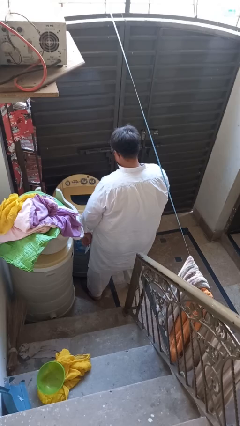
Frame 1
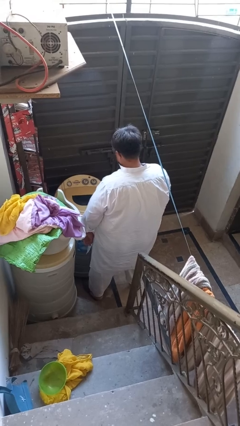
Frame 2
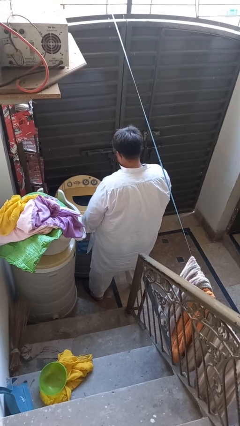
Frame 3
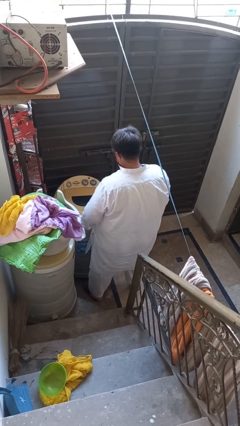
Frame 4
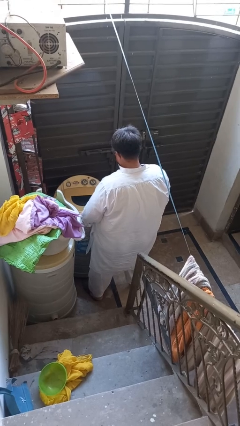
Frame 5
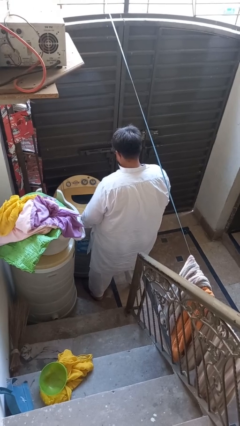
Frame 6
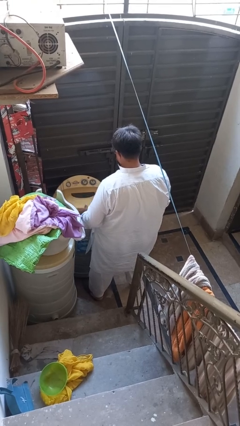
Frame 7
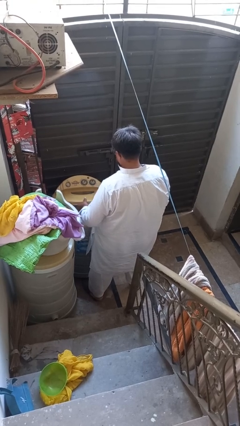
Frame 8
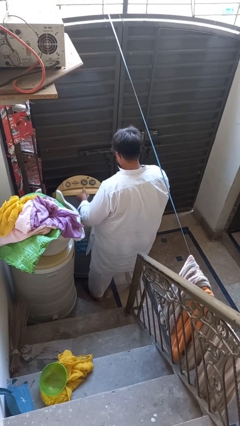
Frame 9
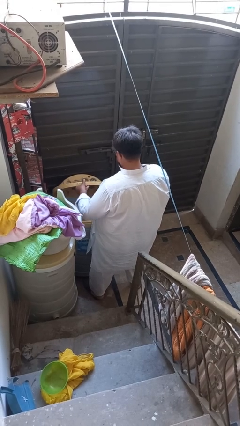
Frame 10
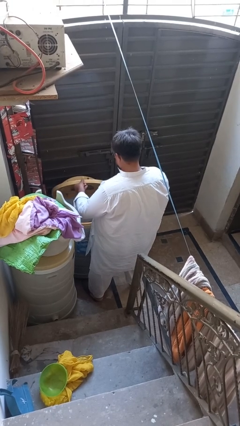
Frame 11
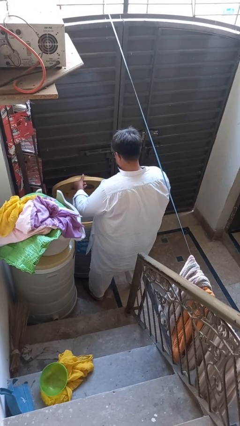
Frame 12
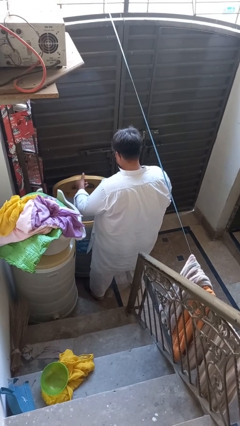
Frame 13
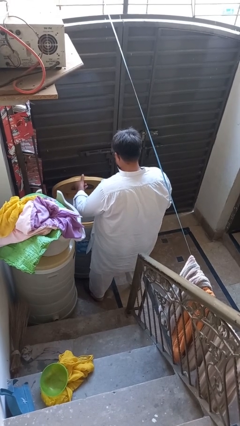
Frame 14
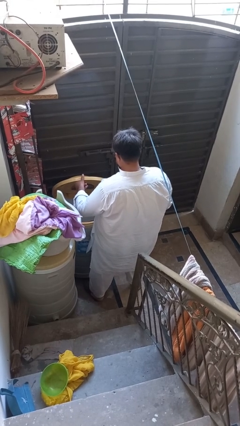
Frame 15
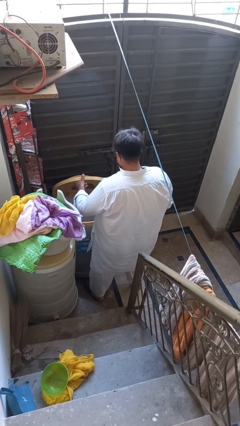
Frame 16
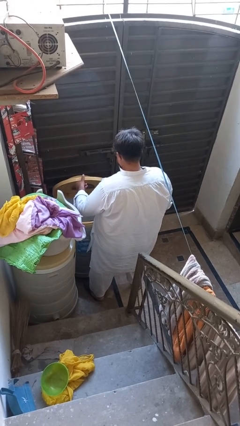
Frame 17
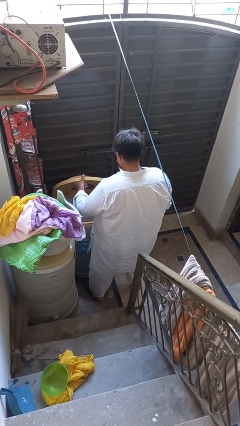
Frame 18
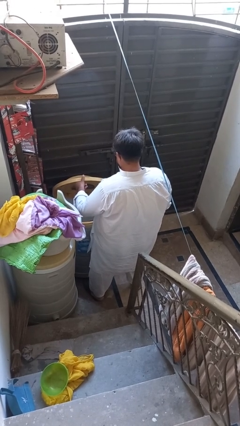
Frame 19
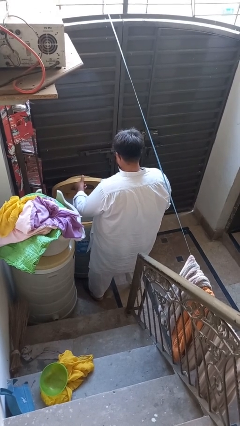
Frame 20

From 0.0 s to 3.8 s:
person opens clothes washer

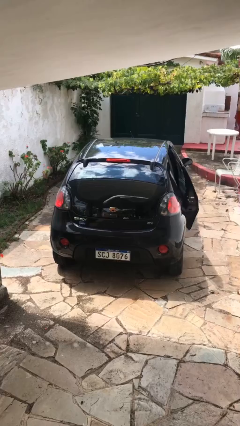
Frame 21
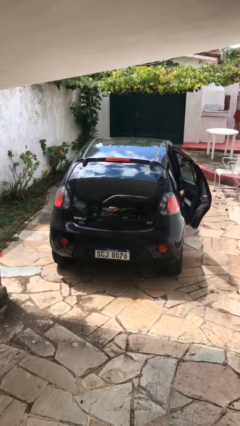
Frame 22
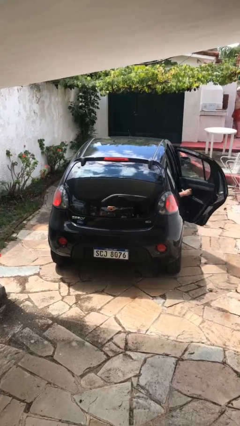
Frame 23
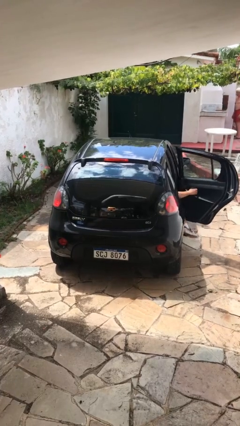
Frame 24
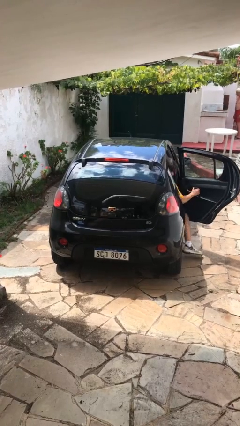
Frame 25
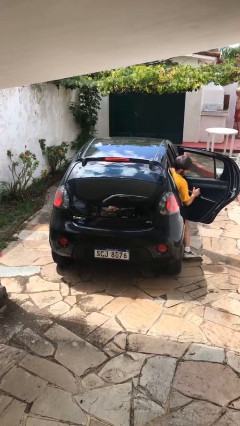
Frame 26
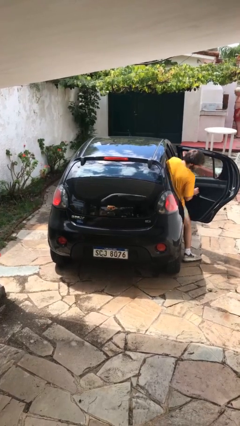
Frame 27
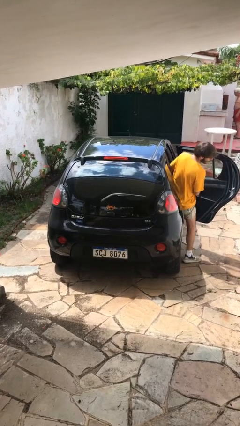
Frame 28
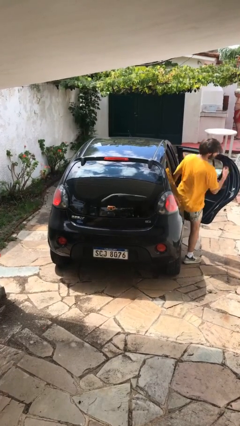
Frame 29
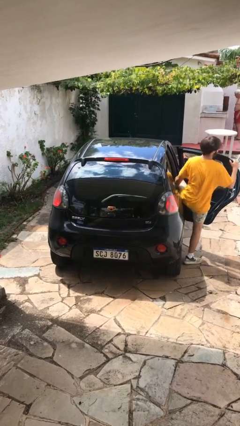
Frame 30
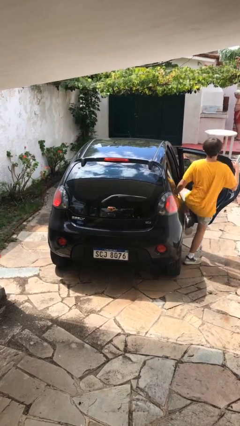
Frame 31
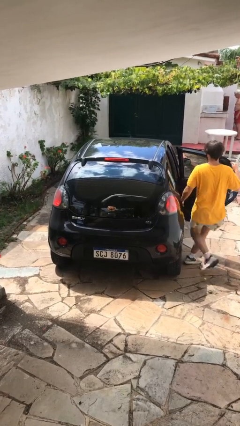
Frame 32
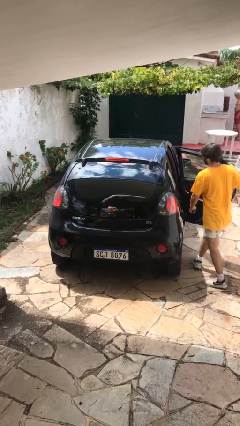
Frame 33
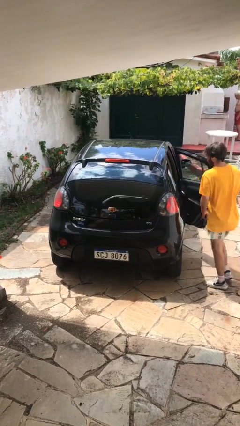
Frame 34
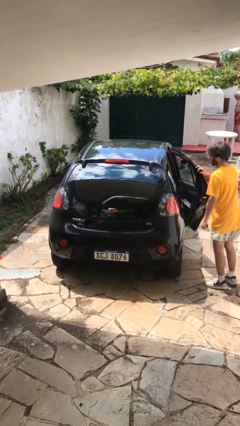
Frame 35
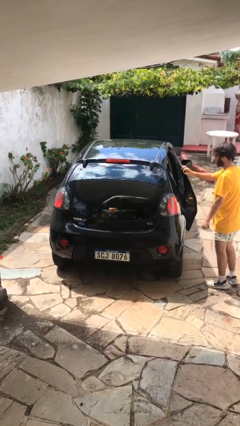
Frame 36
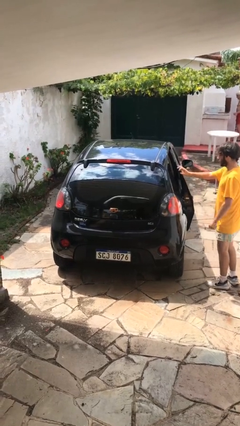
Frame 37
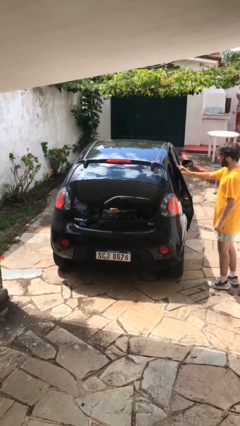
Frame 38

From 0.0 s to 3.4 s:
car drops off person

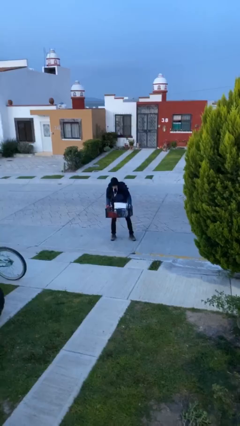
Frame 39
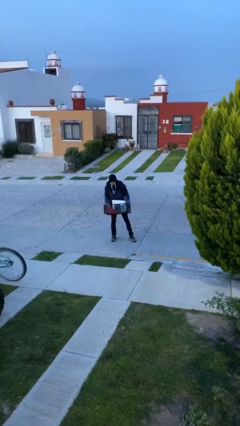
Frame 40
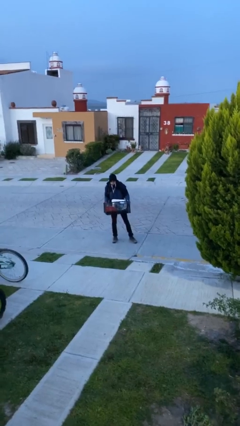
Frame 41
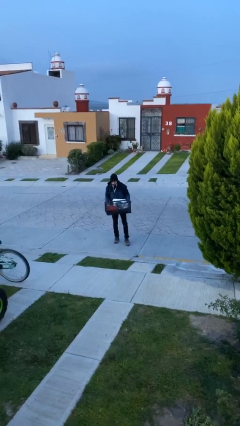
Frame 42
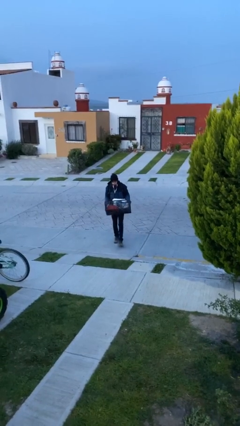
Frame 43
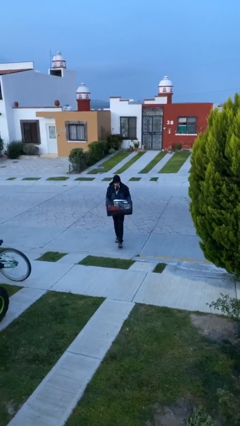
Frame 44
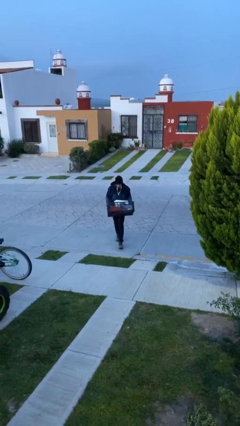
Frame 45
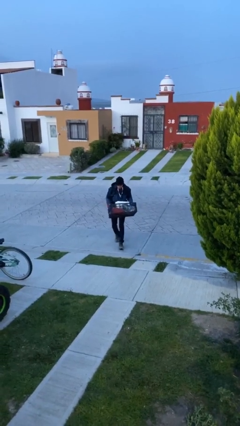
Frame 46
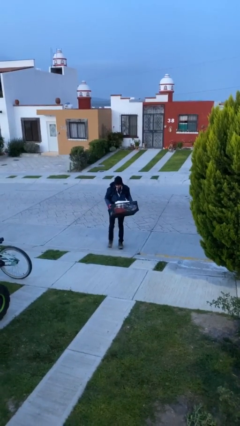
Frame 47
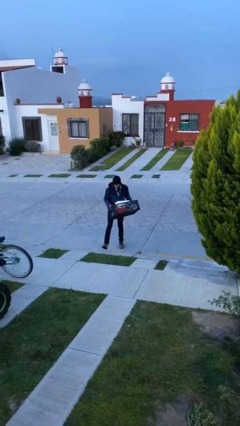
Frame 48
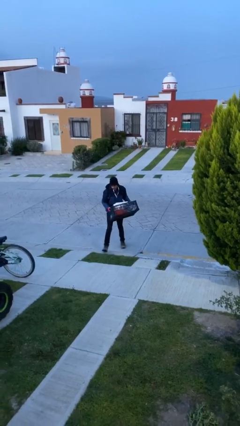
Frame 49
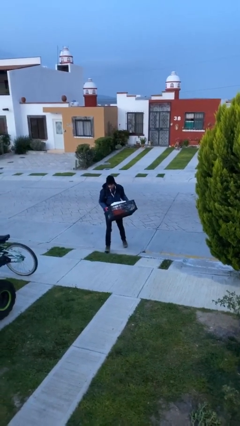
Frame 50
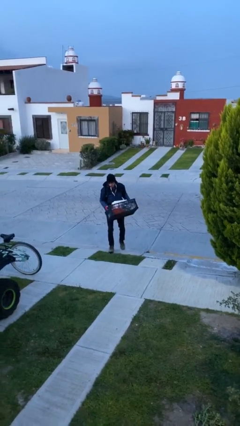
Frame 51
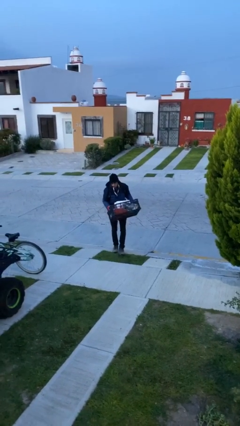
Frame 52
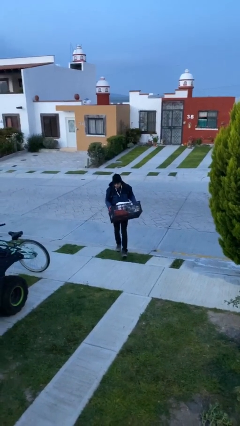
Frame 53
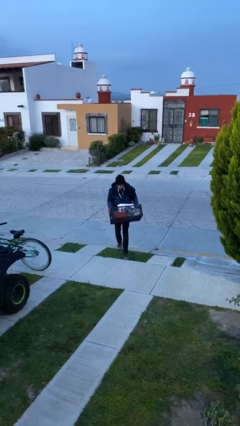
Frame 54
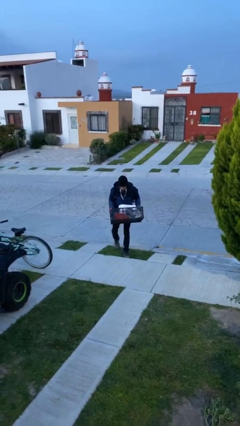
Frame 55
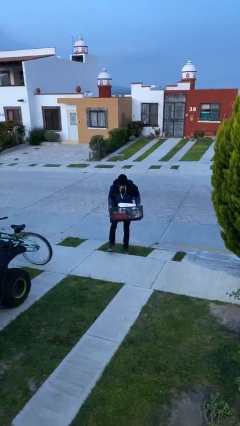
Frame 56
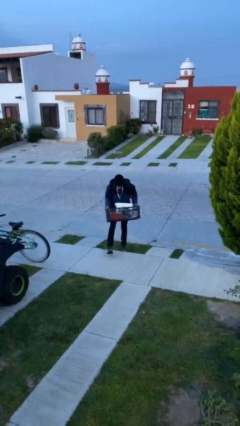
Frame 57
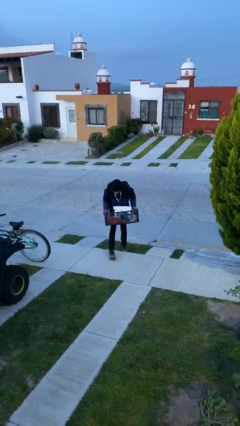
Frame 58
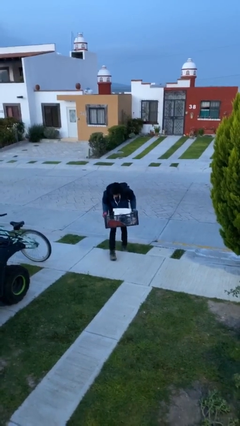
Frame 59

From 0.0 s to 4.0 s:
person carries heavy object

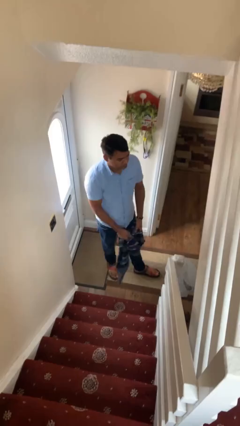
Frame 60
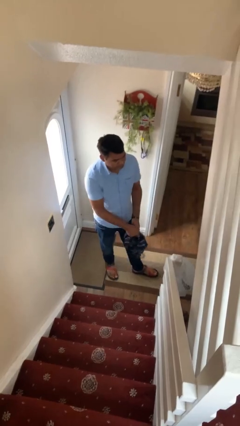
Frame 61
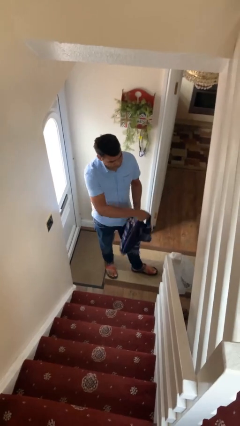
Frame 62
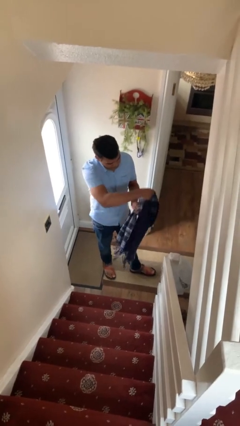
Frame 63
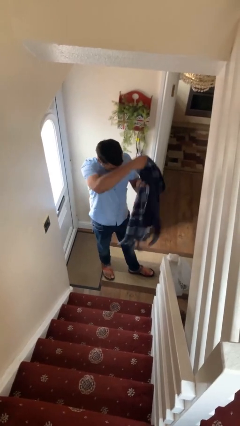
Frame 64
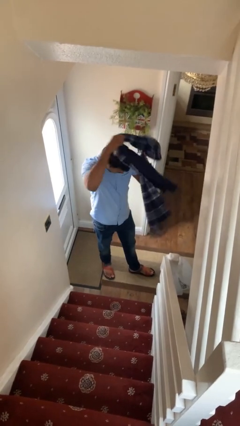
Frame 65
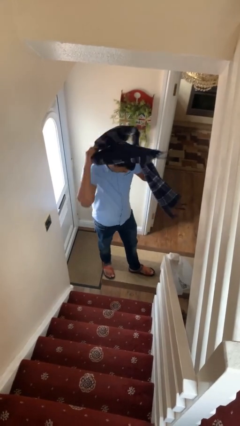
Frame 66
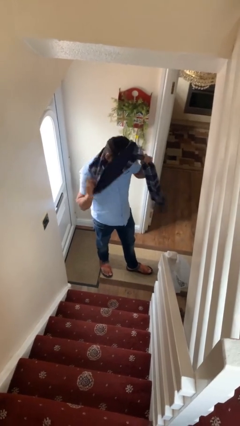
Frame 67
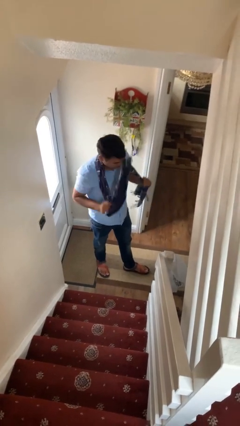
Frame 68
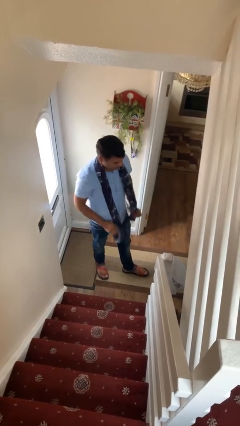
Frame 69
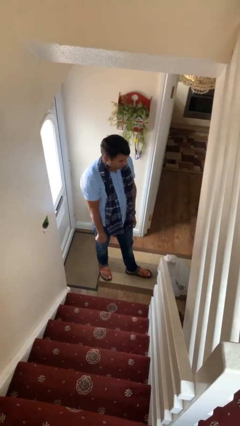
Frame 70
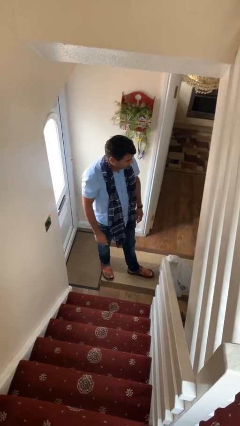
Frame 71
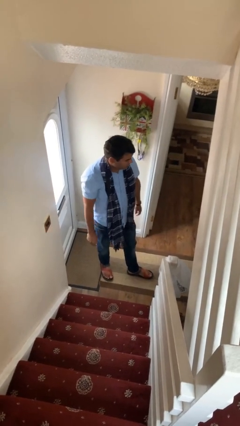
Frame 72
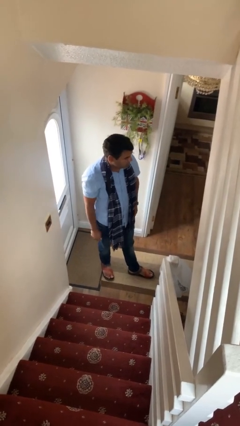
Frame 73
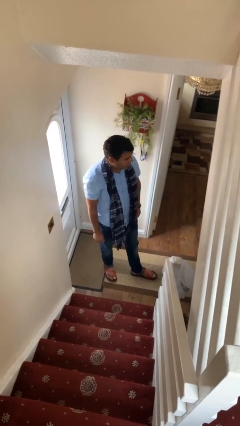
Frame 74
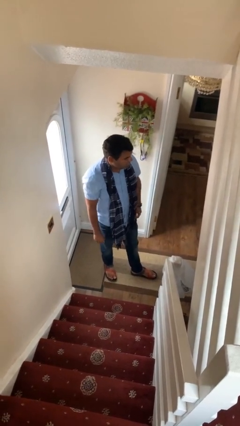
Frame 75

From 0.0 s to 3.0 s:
person puts on scarf

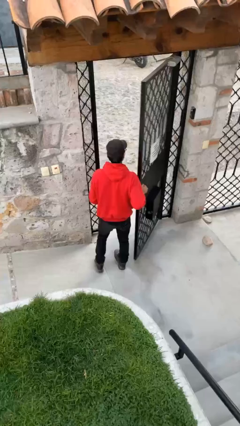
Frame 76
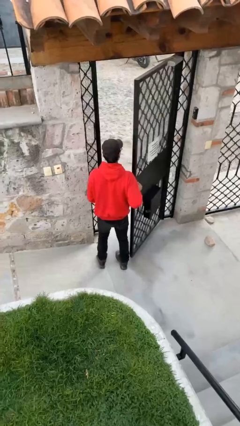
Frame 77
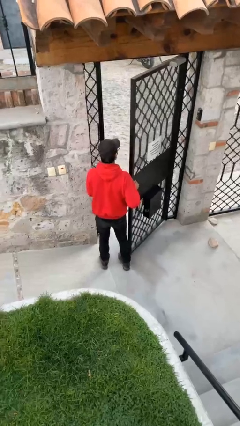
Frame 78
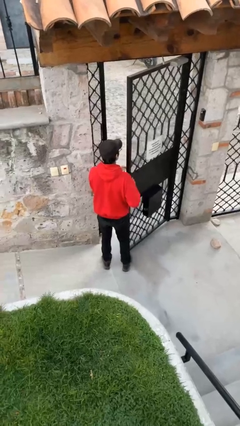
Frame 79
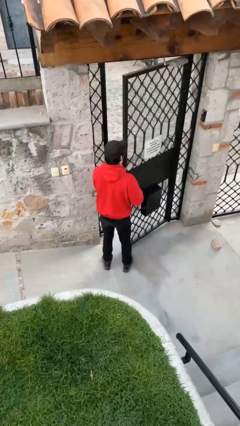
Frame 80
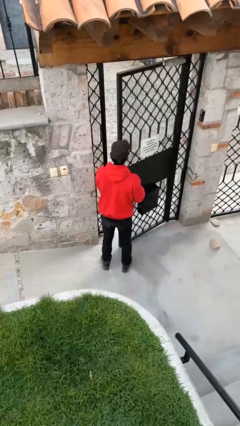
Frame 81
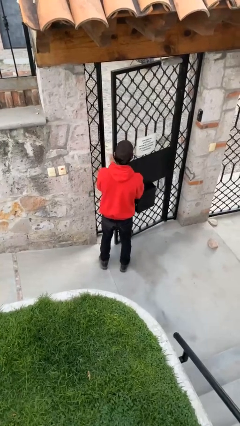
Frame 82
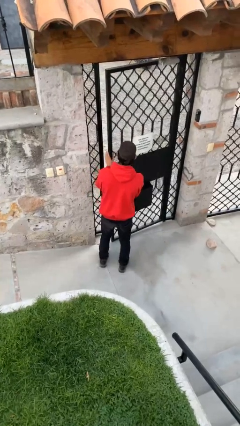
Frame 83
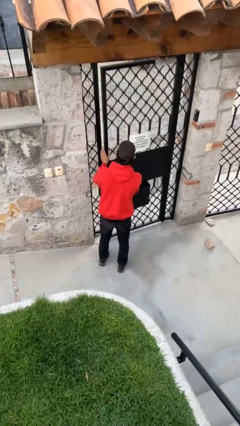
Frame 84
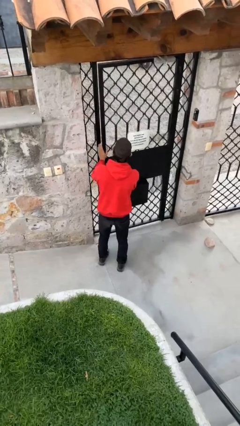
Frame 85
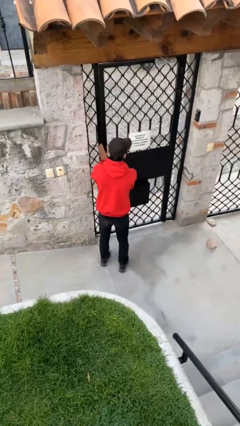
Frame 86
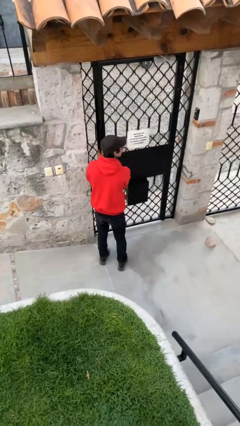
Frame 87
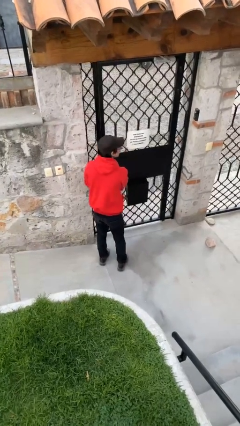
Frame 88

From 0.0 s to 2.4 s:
person closes facility door

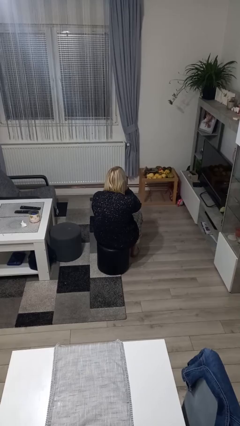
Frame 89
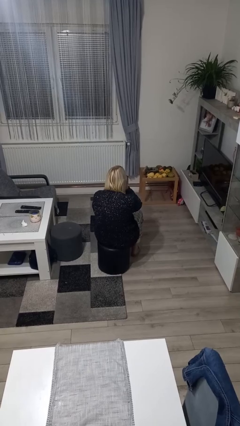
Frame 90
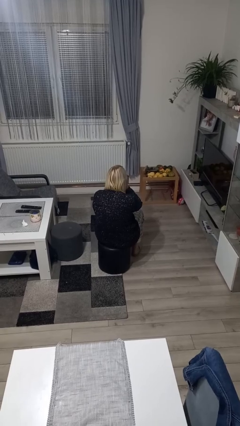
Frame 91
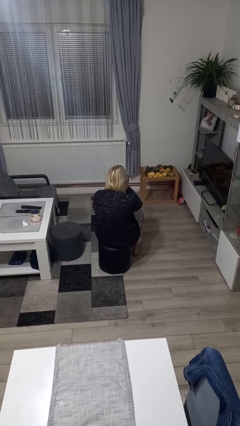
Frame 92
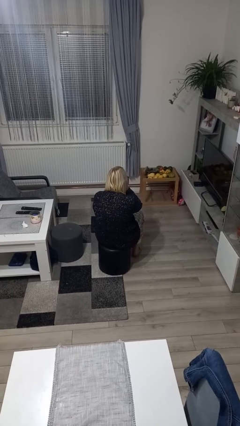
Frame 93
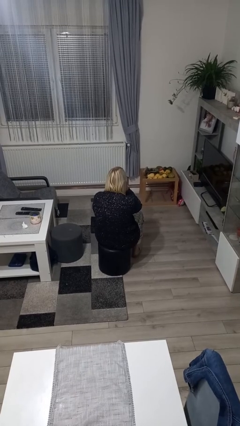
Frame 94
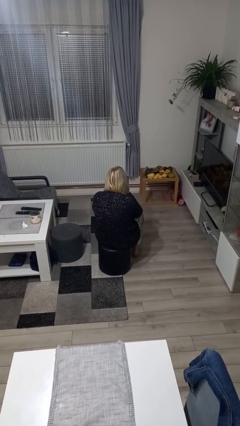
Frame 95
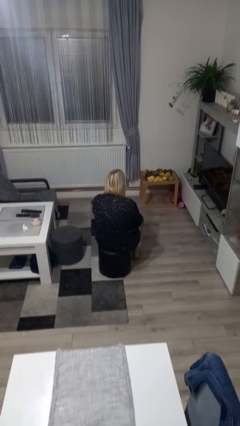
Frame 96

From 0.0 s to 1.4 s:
person gestures be quiet
